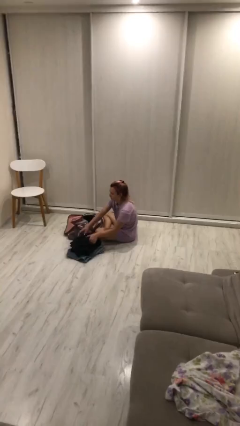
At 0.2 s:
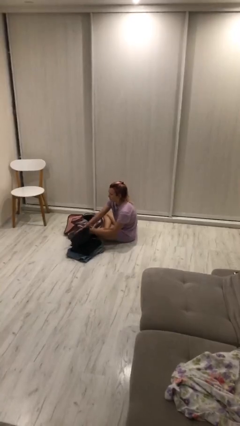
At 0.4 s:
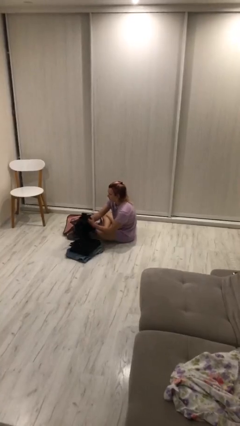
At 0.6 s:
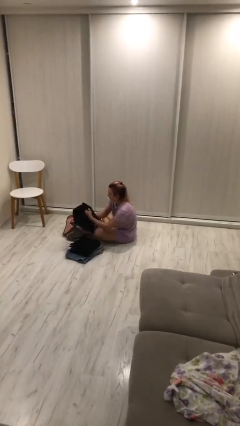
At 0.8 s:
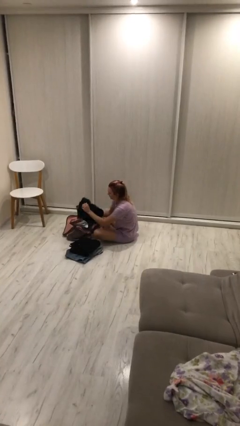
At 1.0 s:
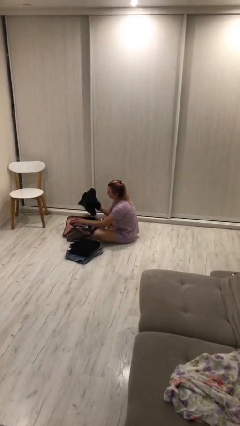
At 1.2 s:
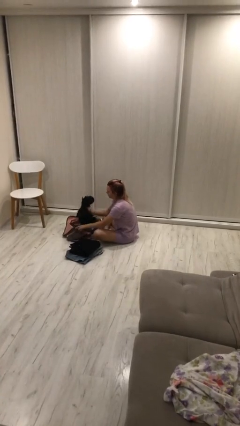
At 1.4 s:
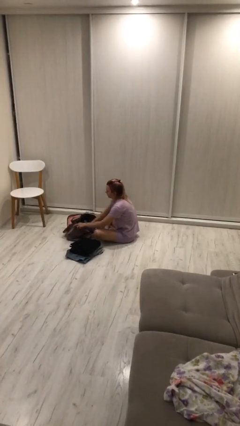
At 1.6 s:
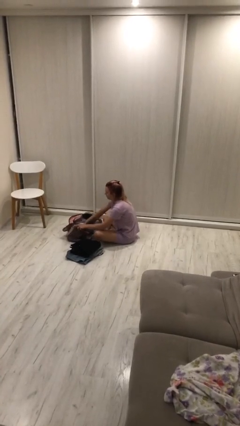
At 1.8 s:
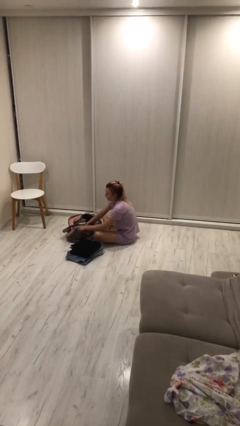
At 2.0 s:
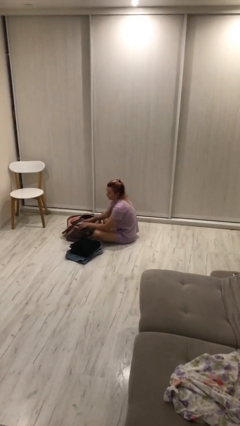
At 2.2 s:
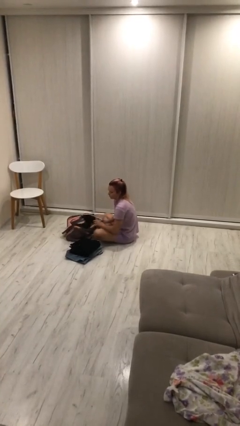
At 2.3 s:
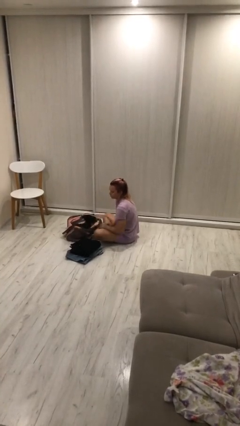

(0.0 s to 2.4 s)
person loads clothes into suitcase

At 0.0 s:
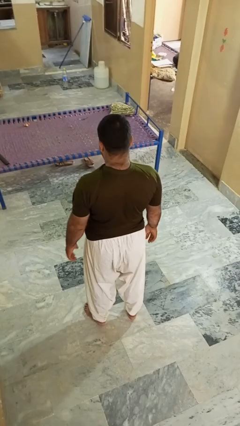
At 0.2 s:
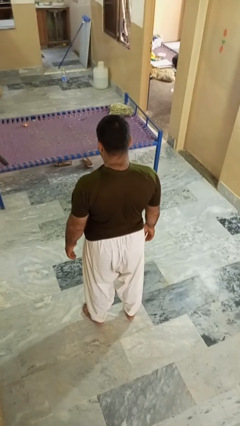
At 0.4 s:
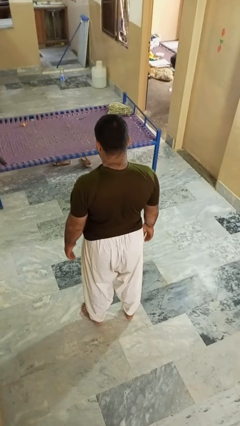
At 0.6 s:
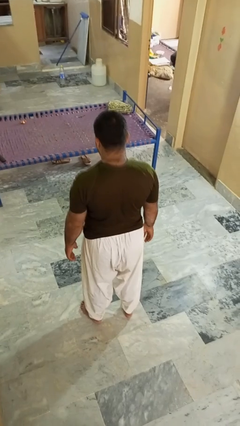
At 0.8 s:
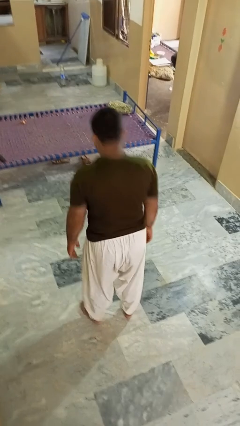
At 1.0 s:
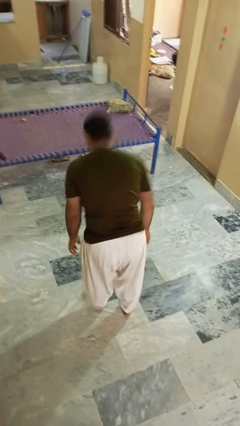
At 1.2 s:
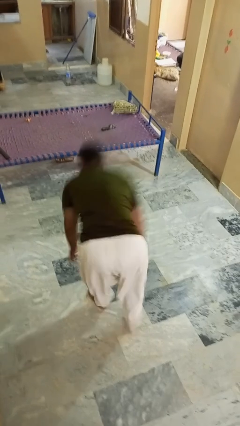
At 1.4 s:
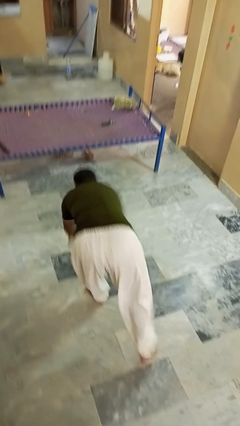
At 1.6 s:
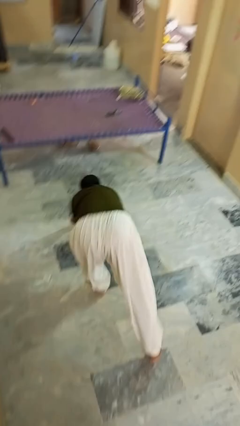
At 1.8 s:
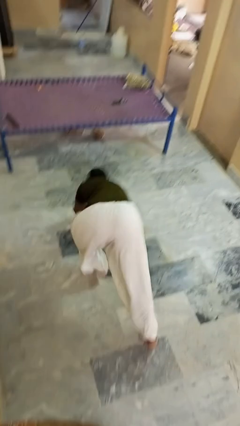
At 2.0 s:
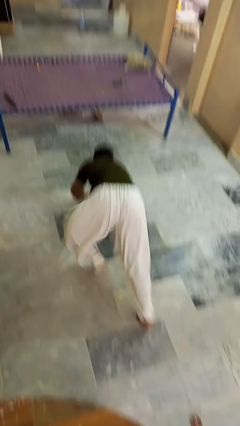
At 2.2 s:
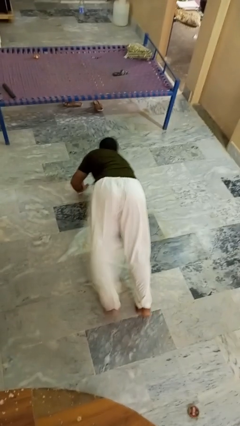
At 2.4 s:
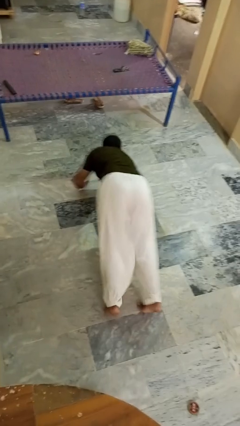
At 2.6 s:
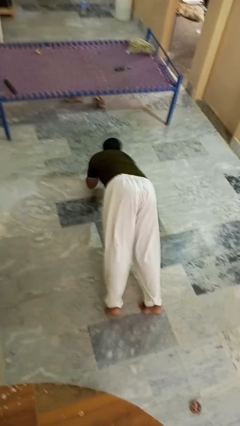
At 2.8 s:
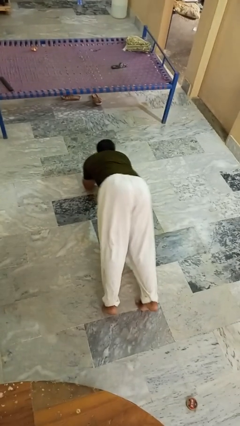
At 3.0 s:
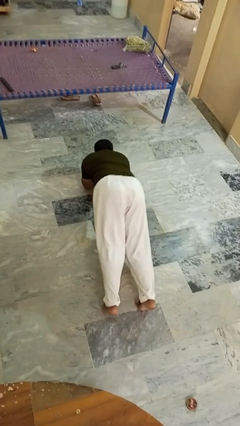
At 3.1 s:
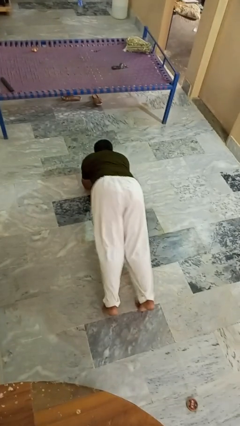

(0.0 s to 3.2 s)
person exercises with plank

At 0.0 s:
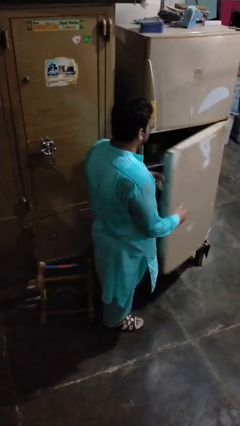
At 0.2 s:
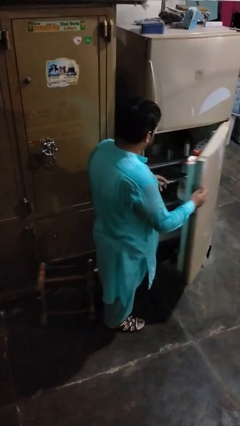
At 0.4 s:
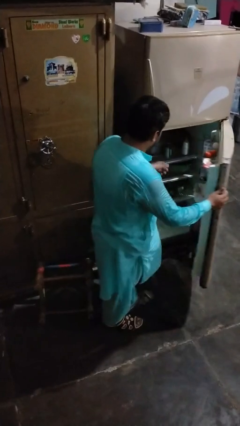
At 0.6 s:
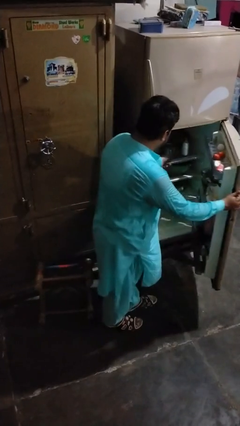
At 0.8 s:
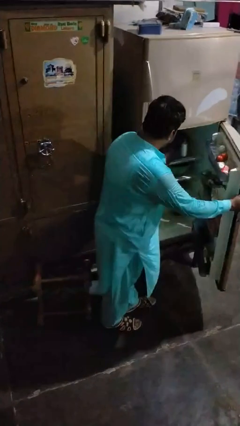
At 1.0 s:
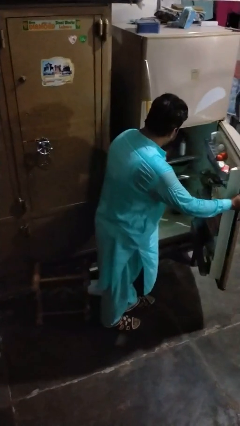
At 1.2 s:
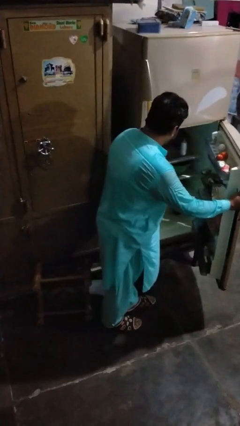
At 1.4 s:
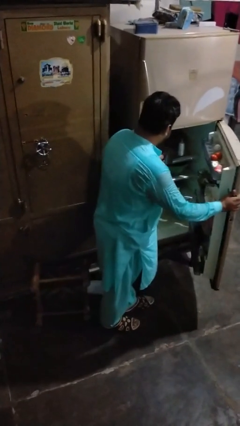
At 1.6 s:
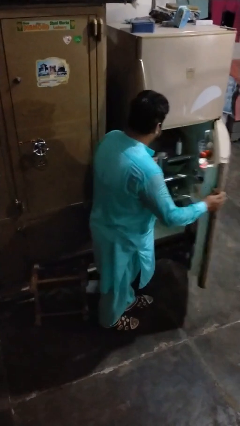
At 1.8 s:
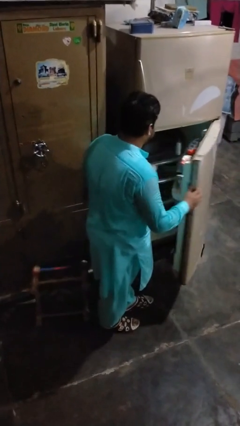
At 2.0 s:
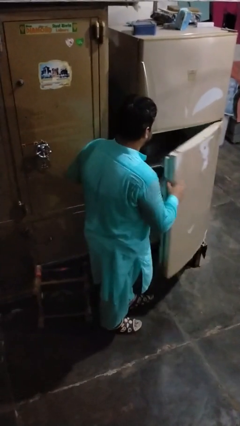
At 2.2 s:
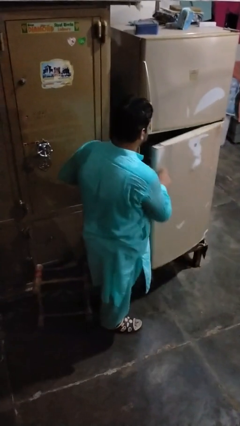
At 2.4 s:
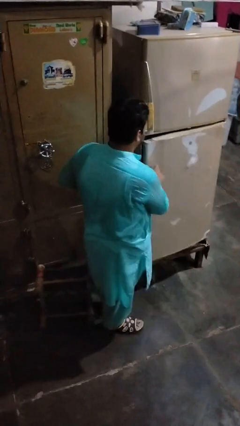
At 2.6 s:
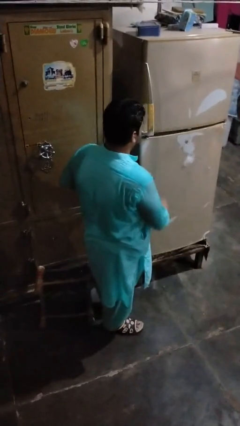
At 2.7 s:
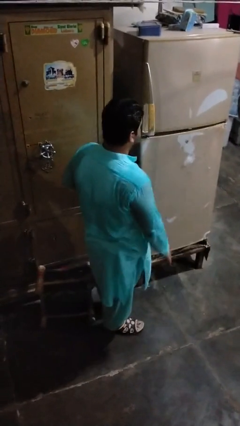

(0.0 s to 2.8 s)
person takes object from refrigerator

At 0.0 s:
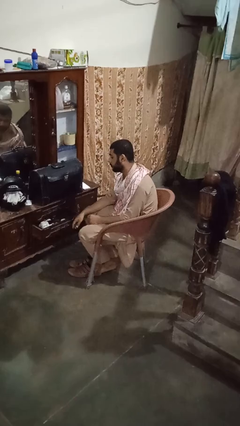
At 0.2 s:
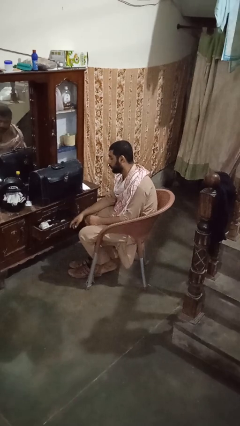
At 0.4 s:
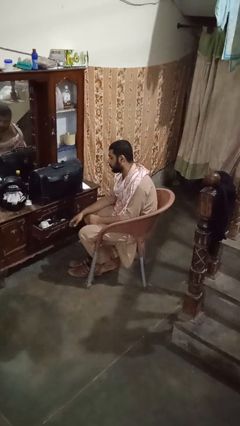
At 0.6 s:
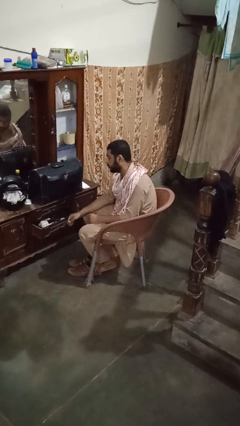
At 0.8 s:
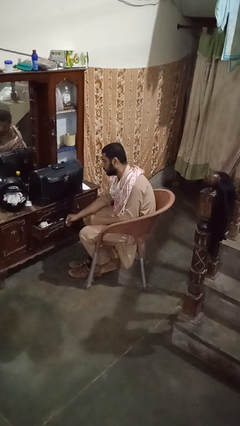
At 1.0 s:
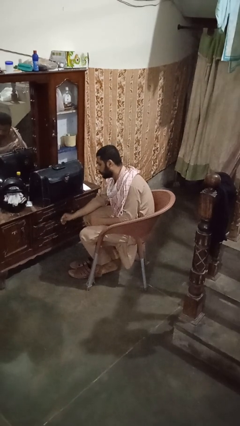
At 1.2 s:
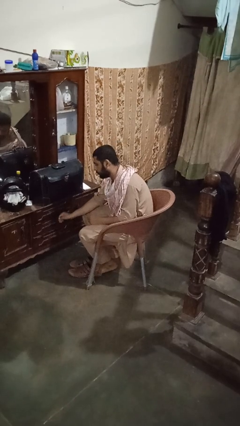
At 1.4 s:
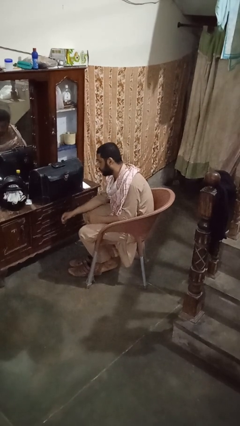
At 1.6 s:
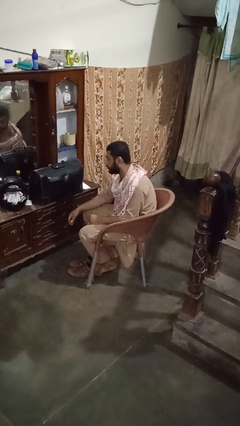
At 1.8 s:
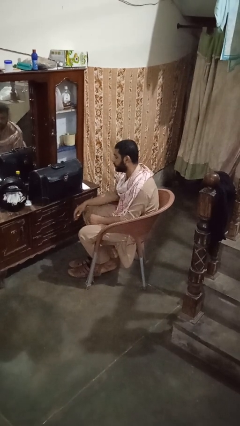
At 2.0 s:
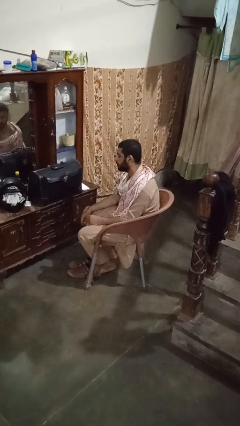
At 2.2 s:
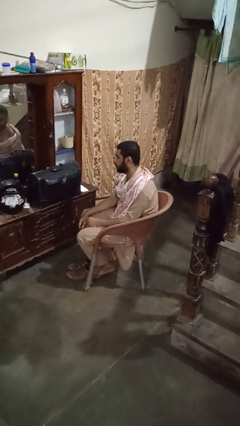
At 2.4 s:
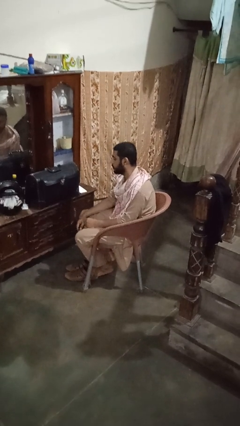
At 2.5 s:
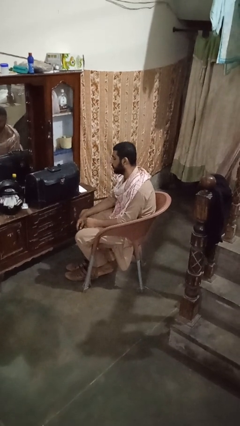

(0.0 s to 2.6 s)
person closes dresser drawer

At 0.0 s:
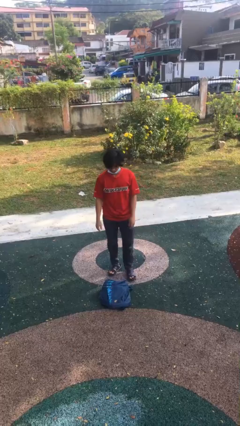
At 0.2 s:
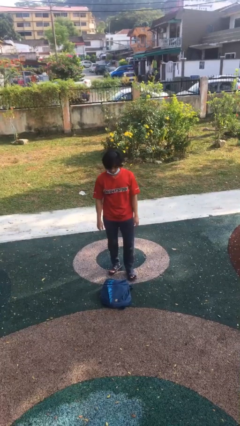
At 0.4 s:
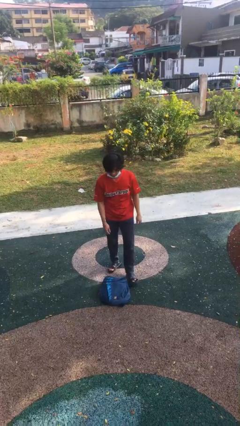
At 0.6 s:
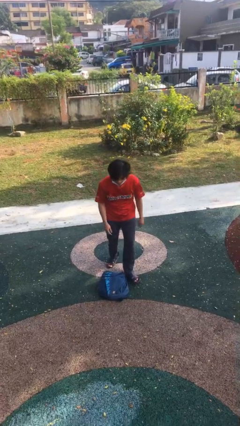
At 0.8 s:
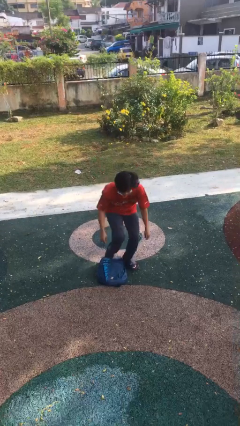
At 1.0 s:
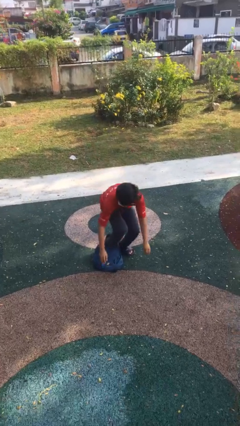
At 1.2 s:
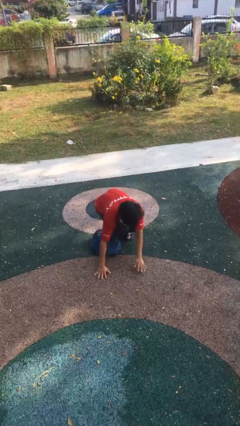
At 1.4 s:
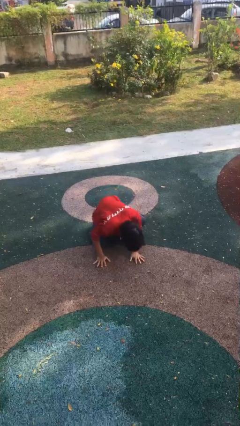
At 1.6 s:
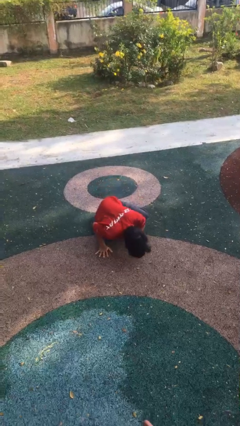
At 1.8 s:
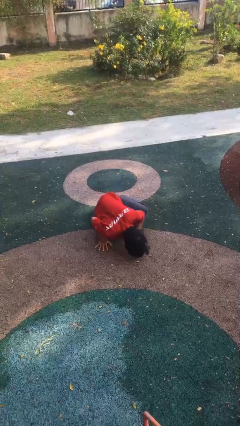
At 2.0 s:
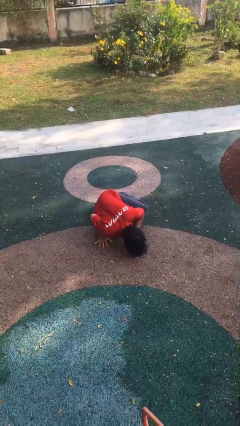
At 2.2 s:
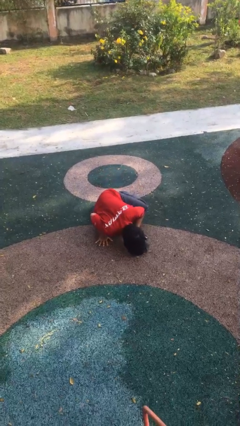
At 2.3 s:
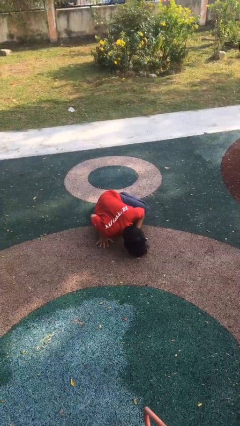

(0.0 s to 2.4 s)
person trips on object on floor

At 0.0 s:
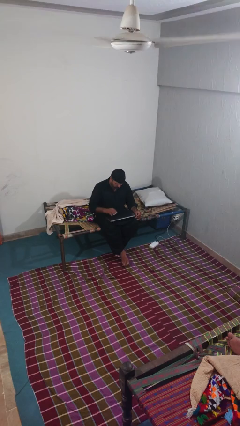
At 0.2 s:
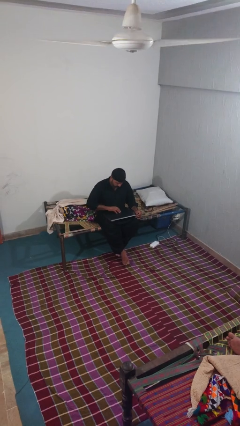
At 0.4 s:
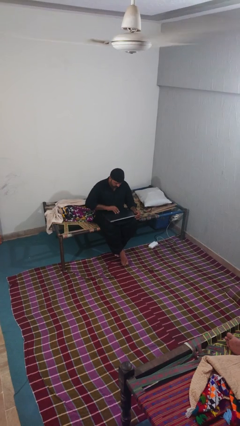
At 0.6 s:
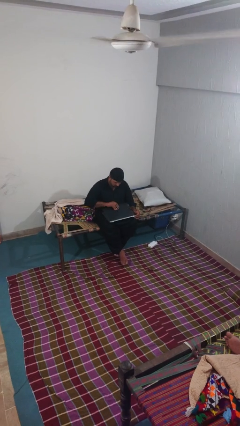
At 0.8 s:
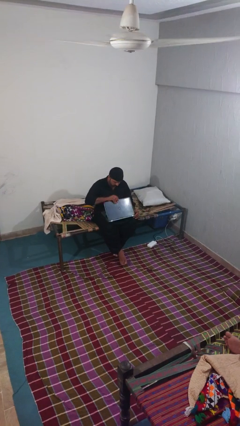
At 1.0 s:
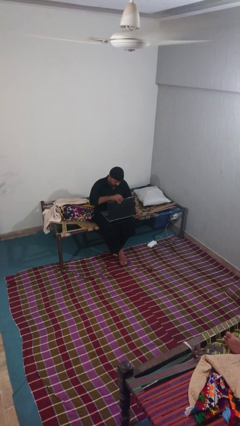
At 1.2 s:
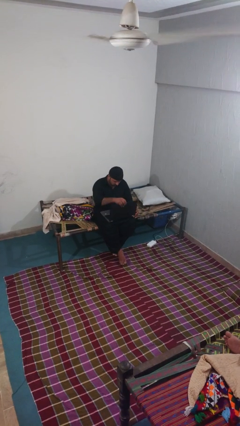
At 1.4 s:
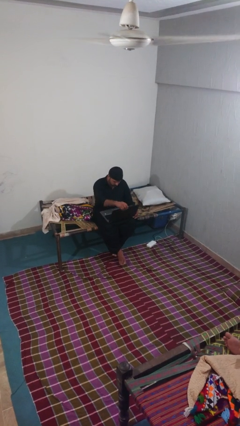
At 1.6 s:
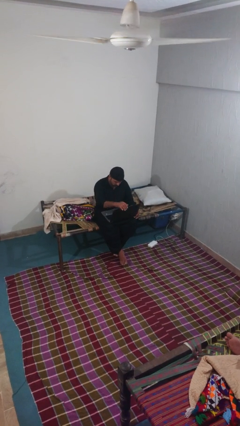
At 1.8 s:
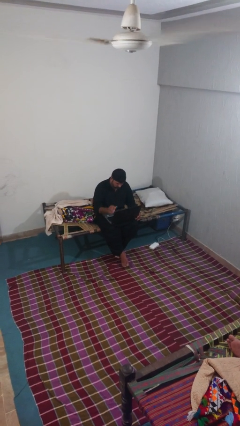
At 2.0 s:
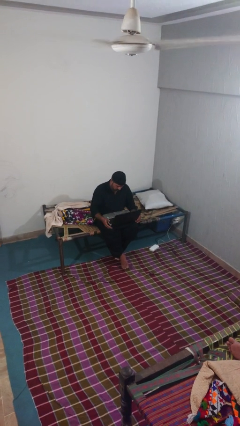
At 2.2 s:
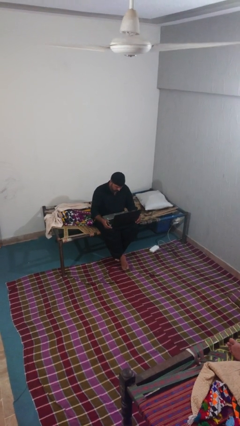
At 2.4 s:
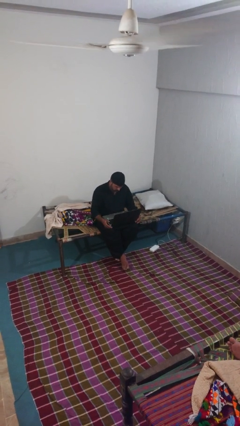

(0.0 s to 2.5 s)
person opens laptop

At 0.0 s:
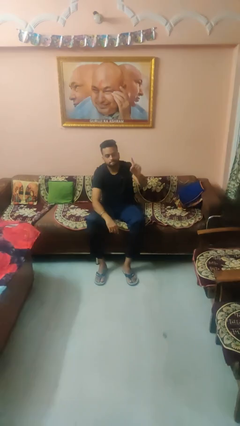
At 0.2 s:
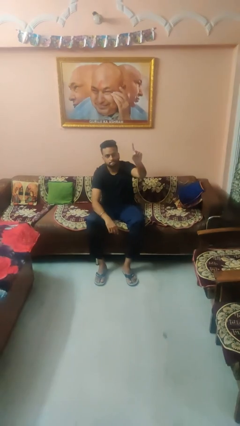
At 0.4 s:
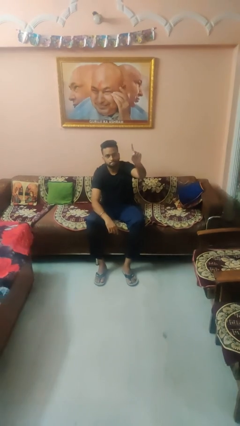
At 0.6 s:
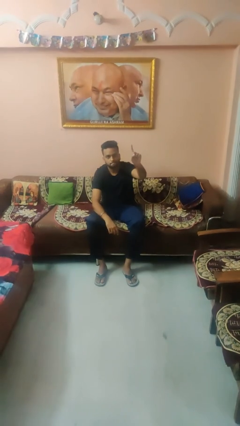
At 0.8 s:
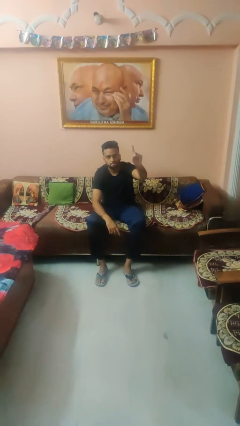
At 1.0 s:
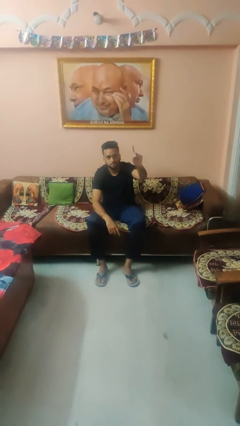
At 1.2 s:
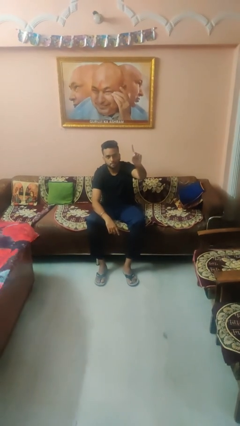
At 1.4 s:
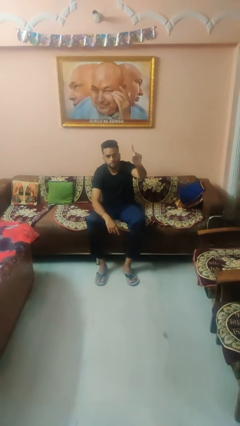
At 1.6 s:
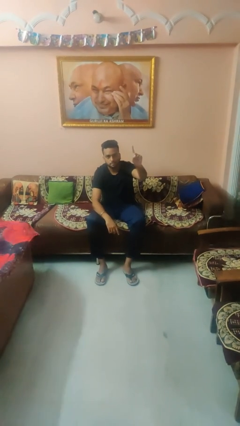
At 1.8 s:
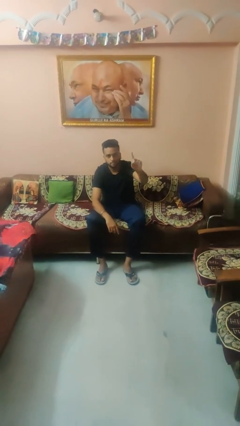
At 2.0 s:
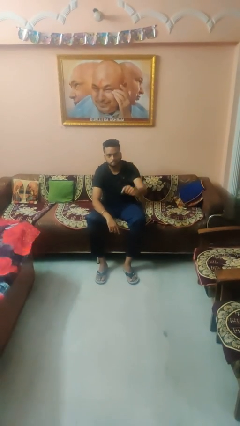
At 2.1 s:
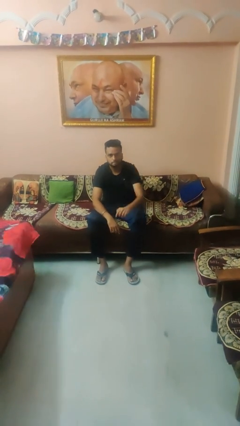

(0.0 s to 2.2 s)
person gestures number one
